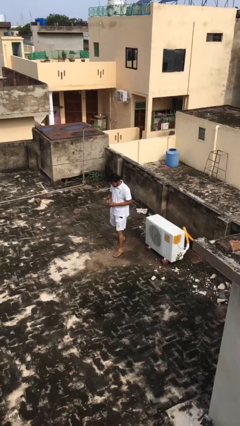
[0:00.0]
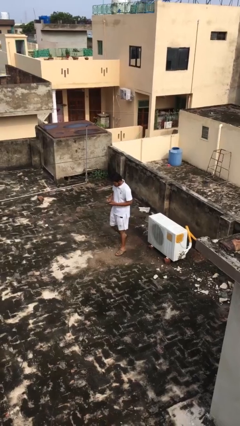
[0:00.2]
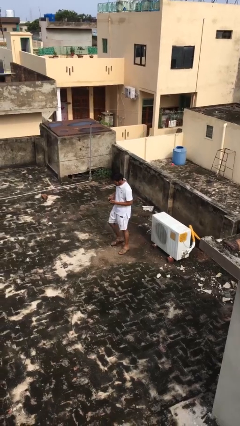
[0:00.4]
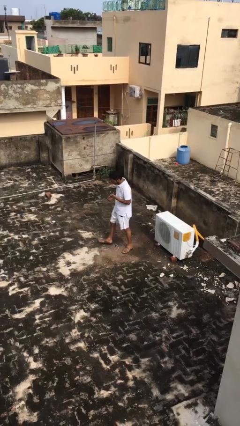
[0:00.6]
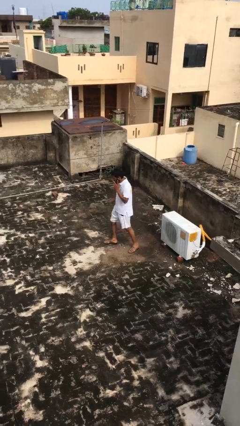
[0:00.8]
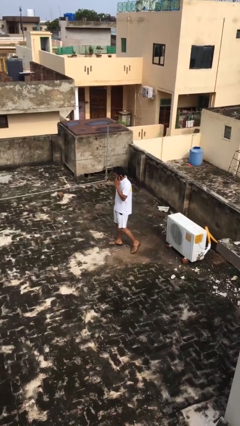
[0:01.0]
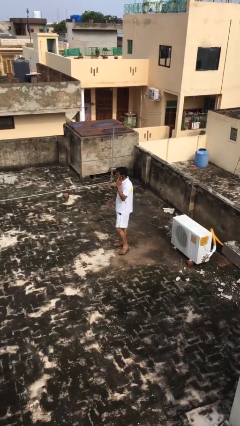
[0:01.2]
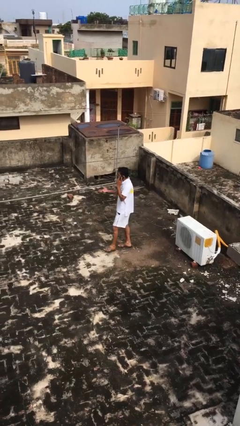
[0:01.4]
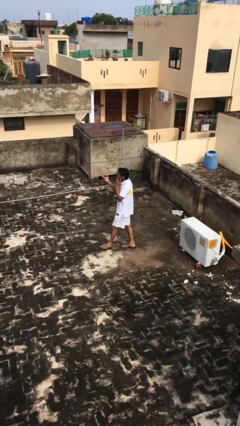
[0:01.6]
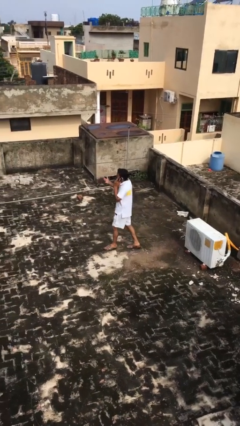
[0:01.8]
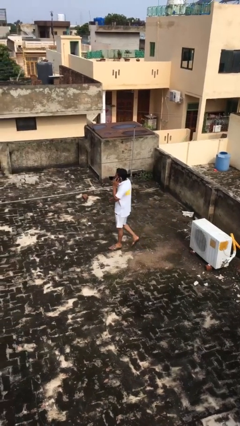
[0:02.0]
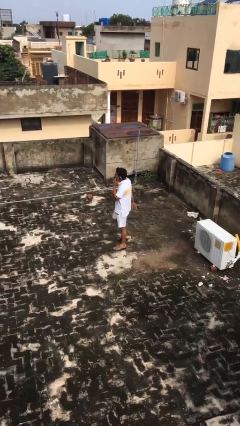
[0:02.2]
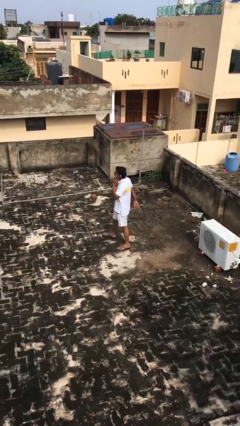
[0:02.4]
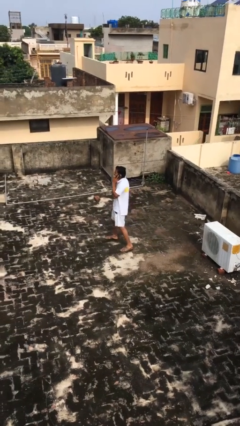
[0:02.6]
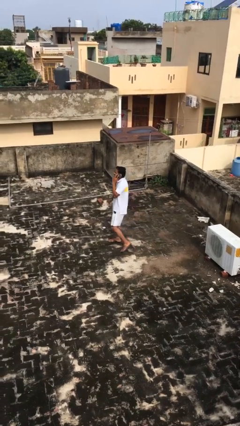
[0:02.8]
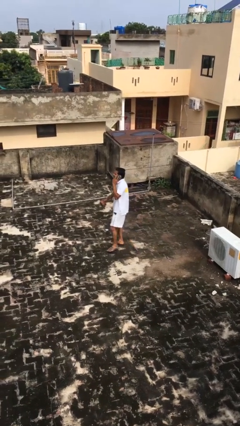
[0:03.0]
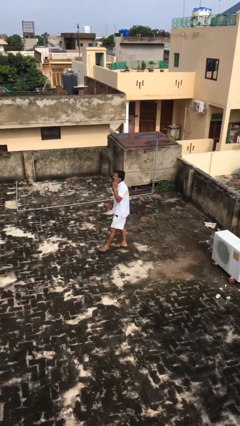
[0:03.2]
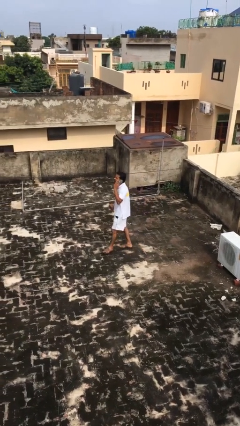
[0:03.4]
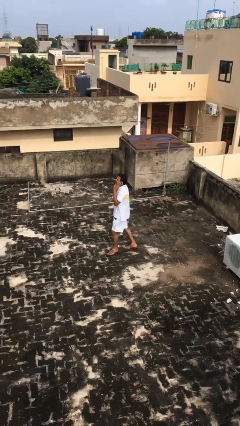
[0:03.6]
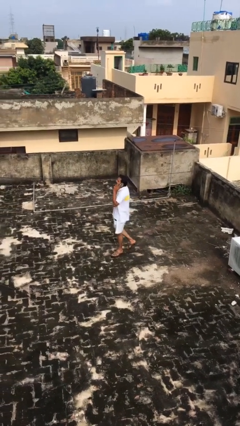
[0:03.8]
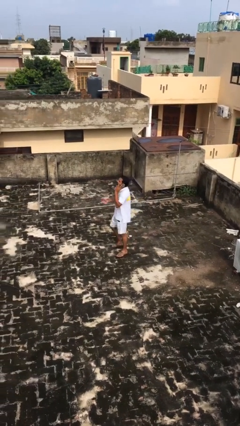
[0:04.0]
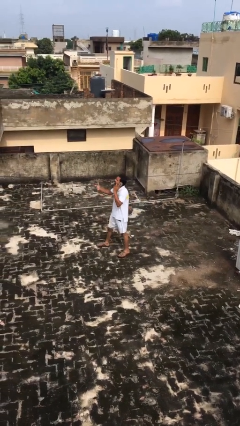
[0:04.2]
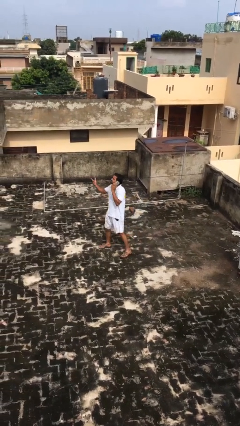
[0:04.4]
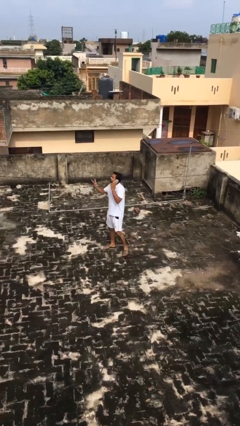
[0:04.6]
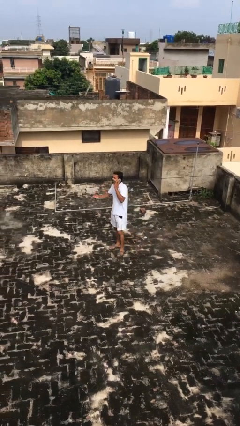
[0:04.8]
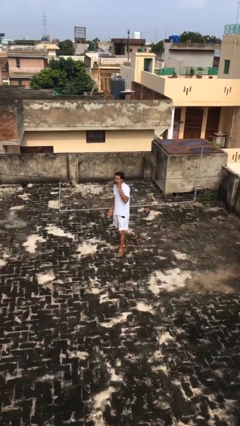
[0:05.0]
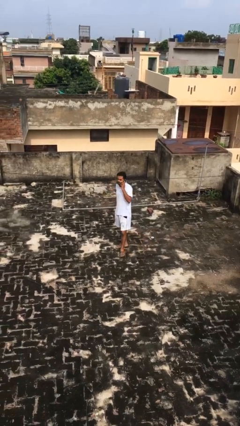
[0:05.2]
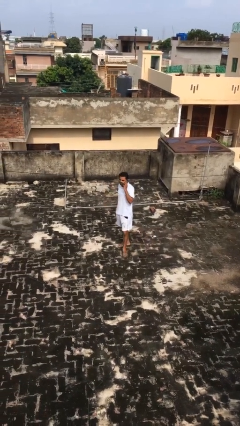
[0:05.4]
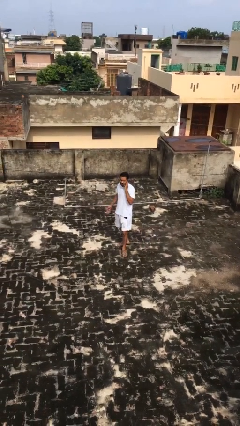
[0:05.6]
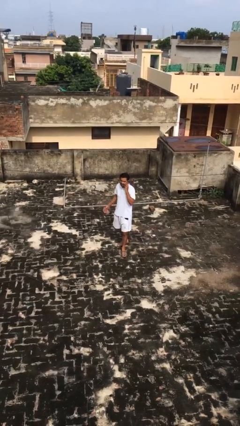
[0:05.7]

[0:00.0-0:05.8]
person talks on phone

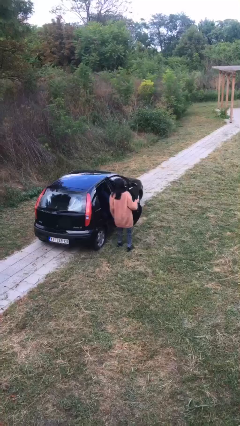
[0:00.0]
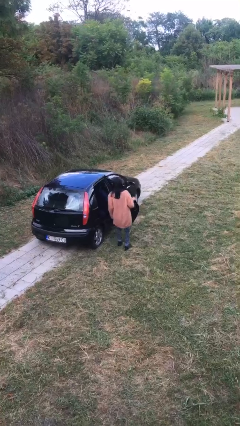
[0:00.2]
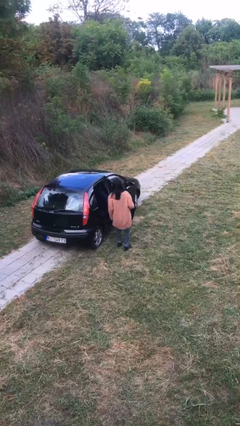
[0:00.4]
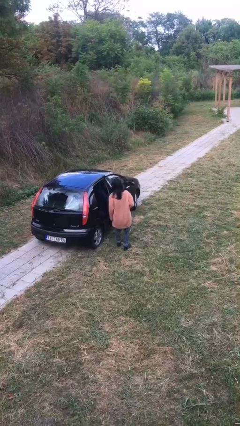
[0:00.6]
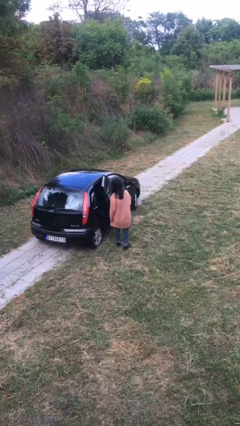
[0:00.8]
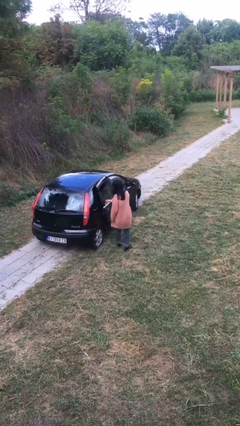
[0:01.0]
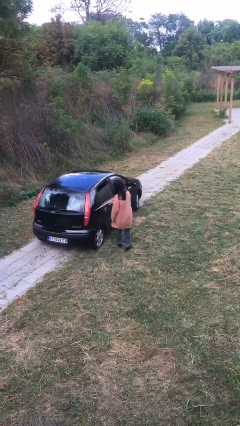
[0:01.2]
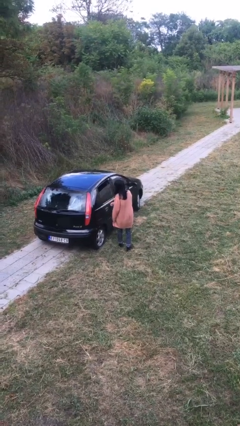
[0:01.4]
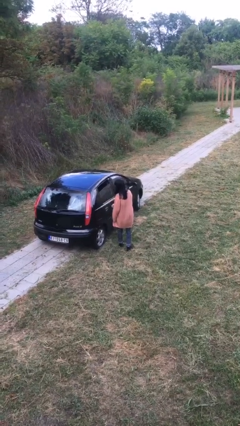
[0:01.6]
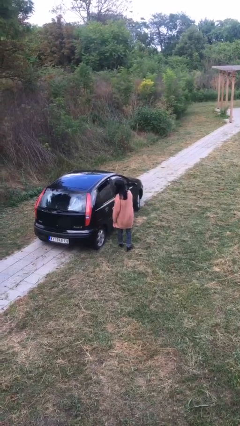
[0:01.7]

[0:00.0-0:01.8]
person closes car door

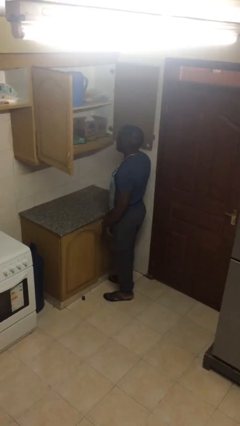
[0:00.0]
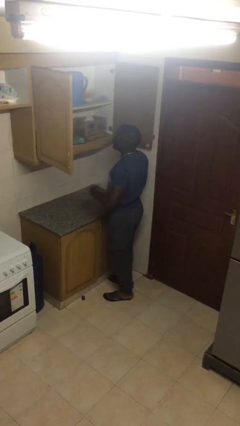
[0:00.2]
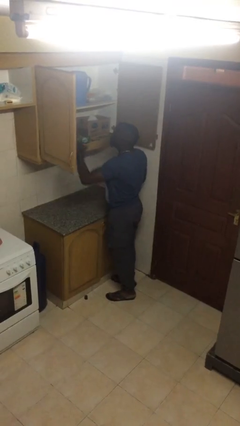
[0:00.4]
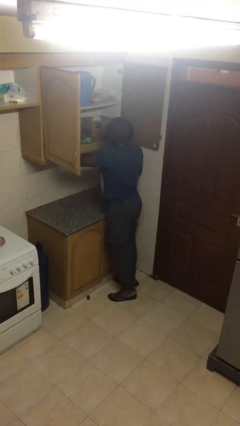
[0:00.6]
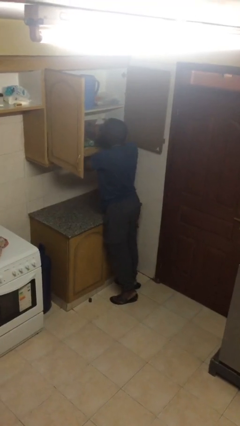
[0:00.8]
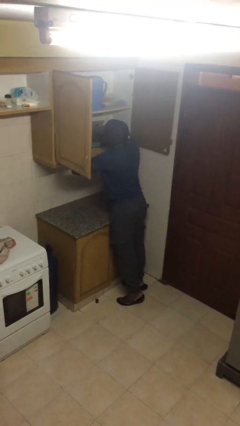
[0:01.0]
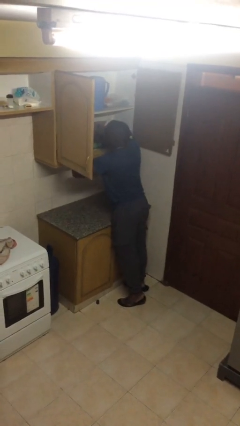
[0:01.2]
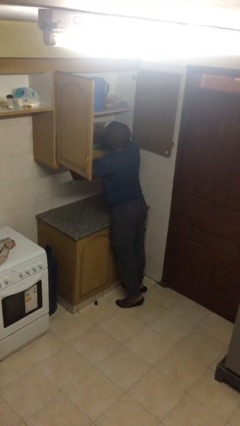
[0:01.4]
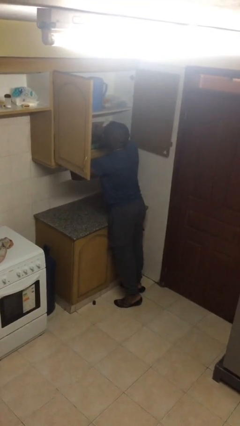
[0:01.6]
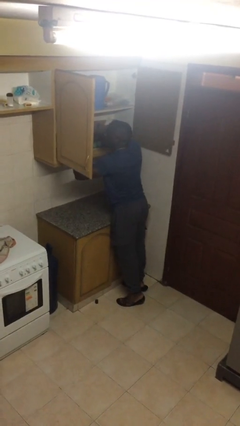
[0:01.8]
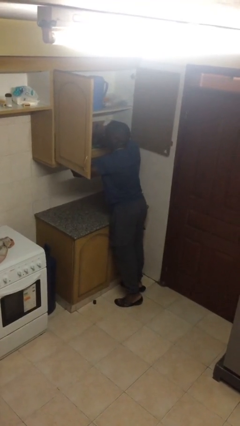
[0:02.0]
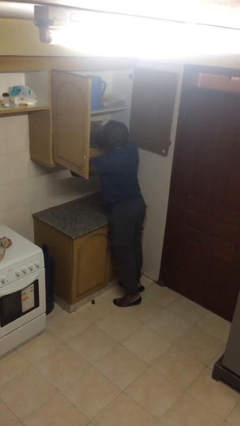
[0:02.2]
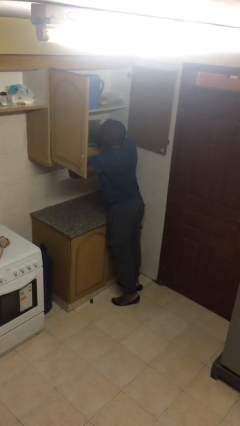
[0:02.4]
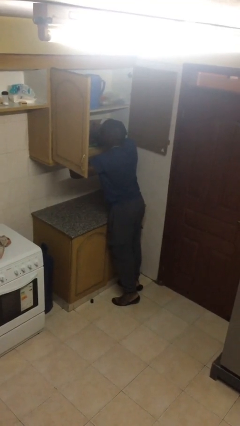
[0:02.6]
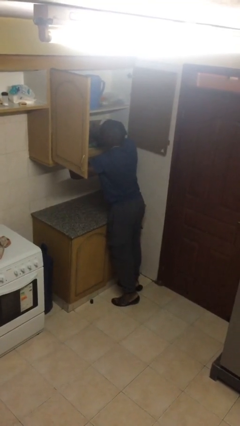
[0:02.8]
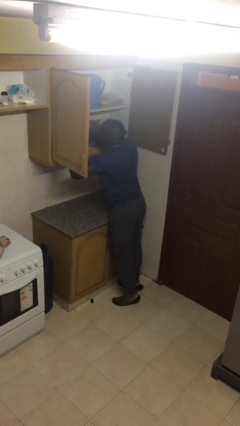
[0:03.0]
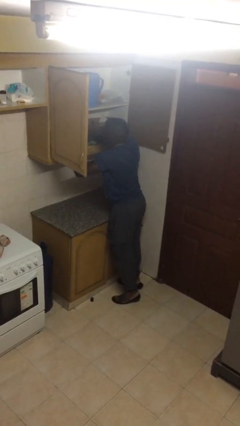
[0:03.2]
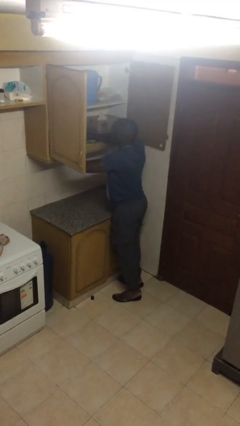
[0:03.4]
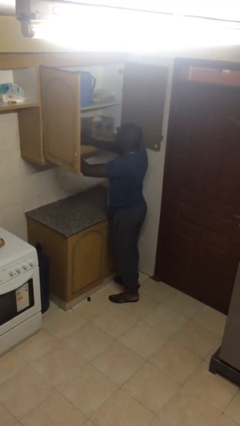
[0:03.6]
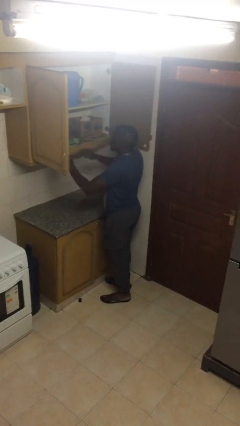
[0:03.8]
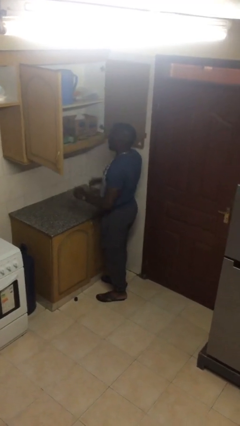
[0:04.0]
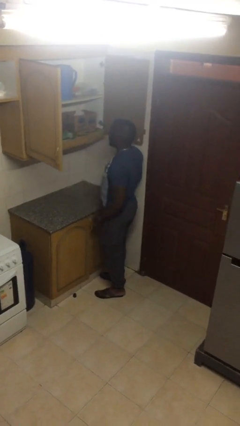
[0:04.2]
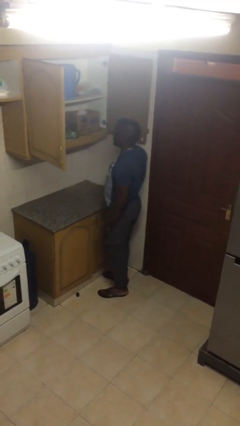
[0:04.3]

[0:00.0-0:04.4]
person searches in cabinet

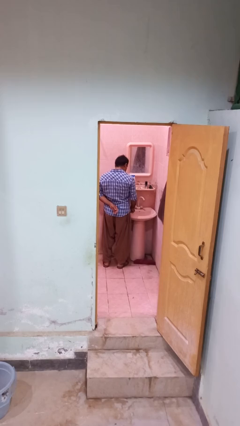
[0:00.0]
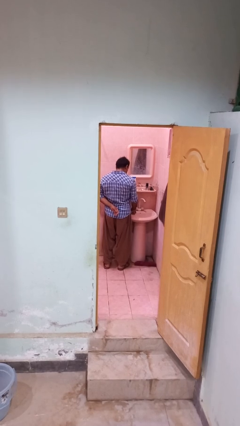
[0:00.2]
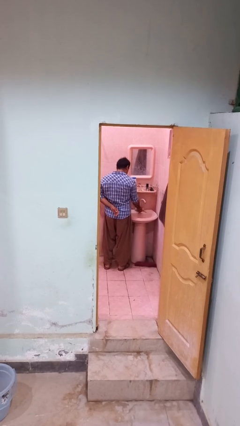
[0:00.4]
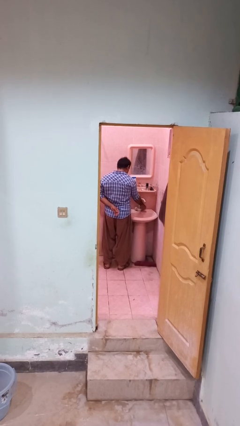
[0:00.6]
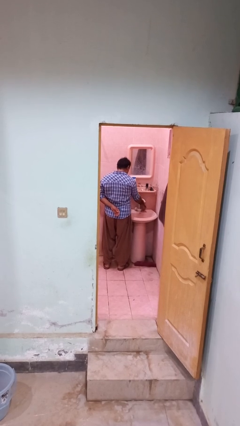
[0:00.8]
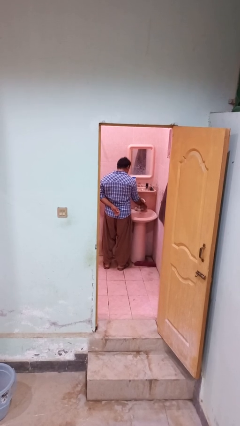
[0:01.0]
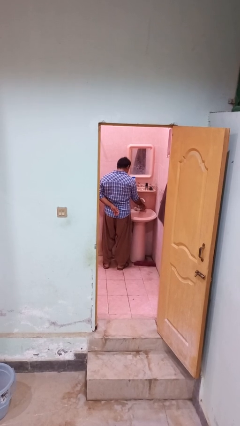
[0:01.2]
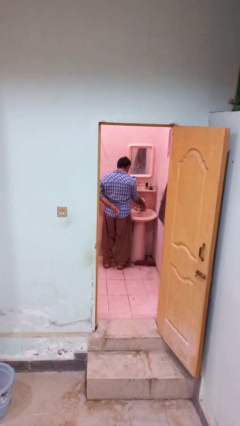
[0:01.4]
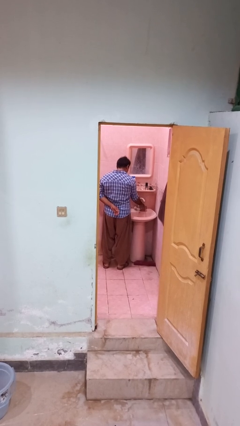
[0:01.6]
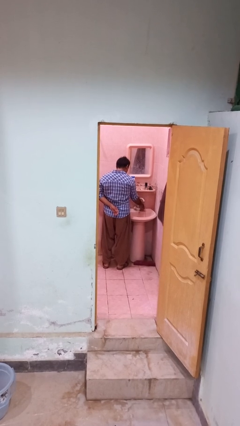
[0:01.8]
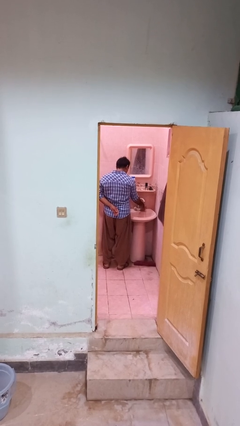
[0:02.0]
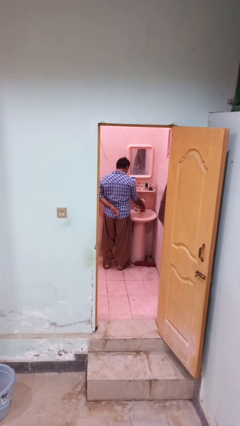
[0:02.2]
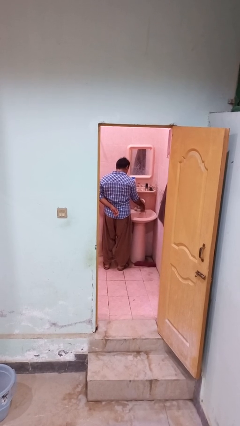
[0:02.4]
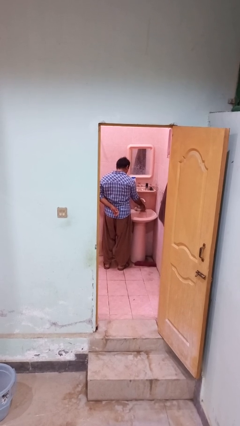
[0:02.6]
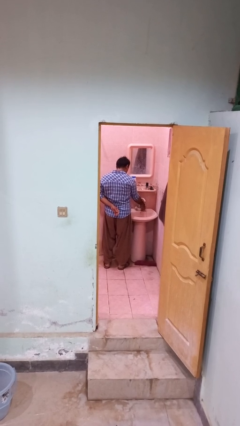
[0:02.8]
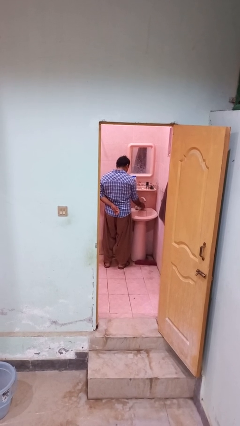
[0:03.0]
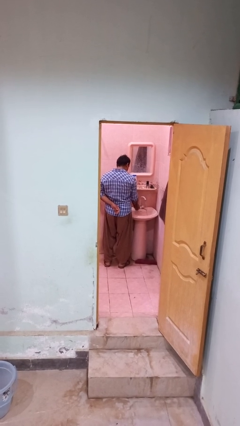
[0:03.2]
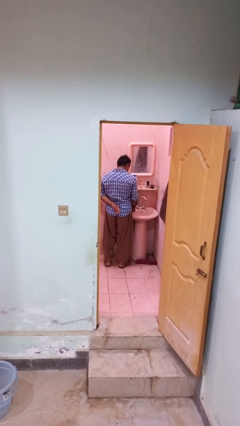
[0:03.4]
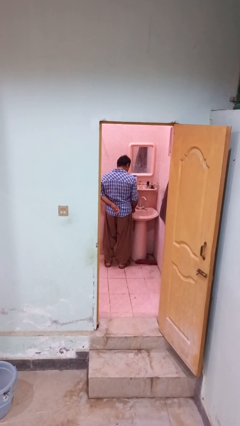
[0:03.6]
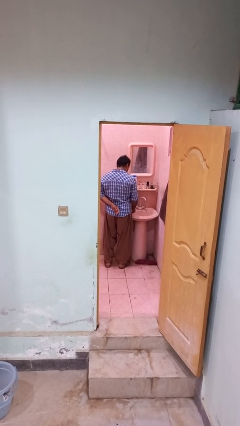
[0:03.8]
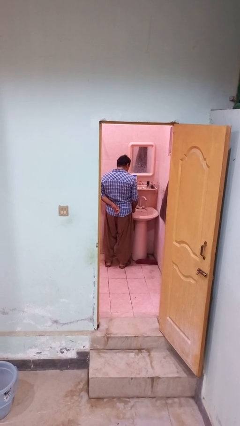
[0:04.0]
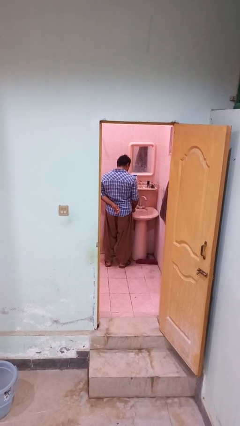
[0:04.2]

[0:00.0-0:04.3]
person turns on faucet

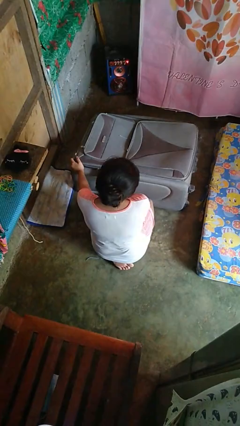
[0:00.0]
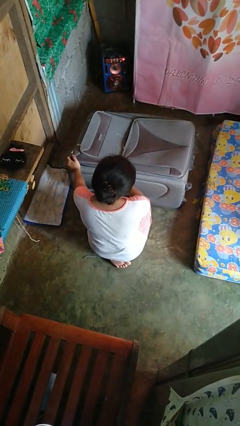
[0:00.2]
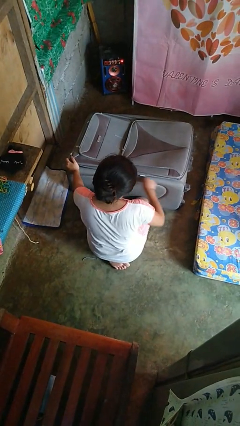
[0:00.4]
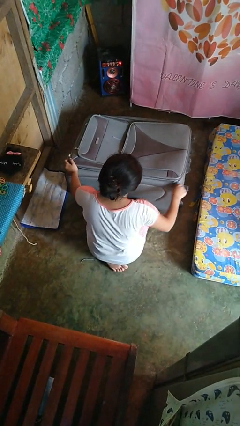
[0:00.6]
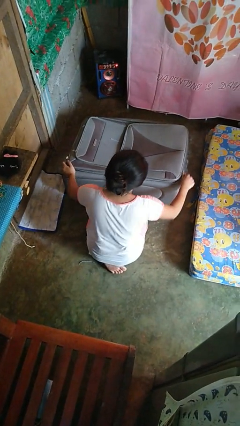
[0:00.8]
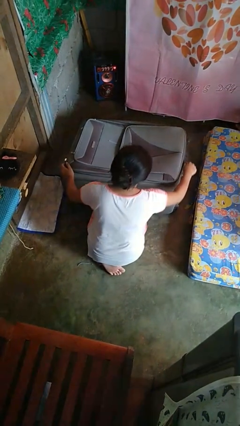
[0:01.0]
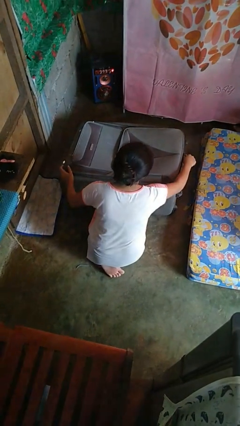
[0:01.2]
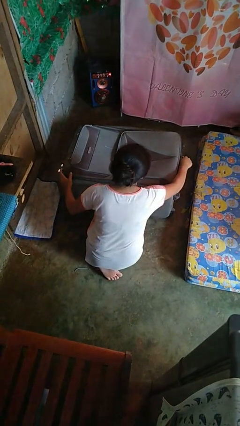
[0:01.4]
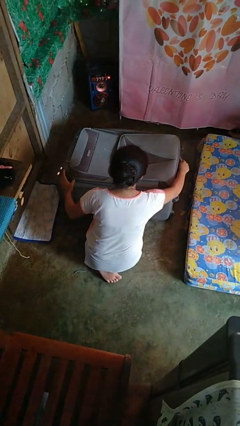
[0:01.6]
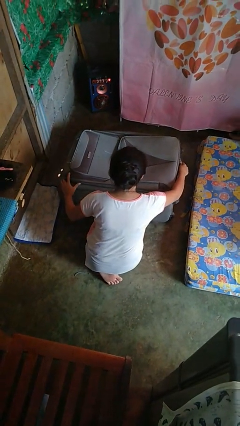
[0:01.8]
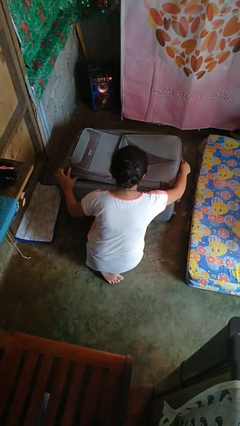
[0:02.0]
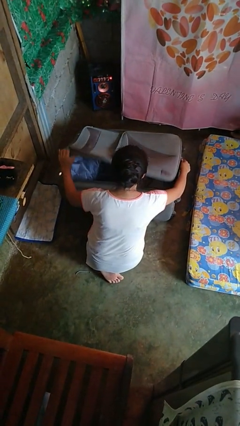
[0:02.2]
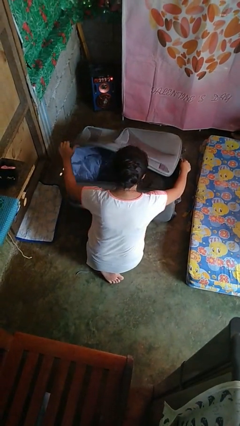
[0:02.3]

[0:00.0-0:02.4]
person opens suitcase
